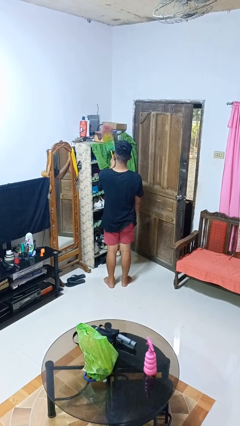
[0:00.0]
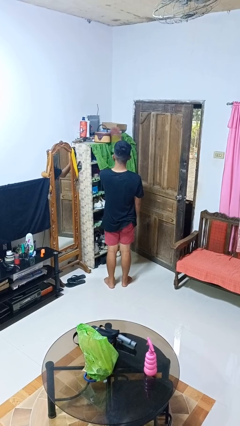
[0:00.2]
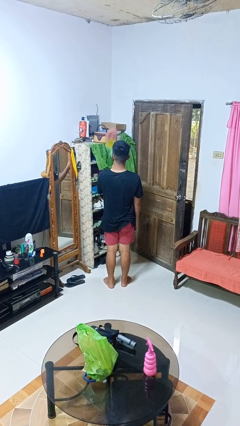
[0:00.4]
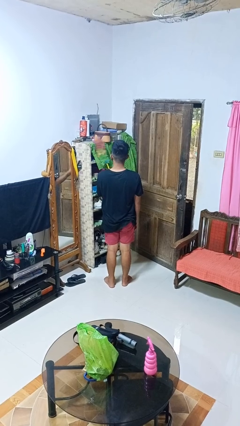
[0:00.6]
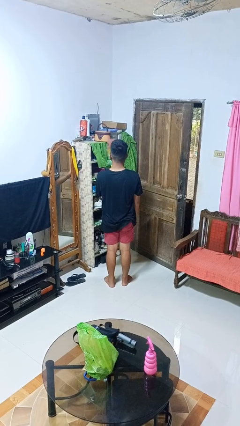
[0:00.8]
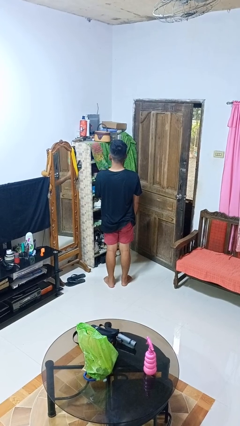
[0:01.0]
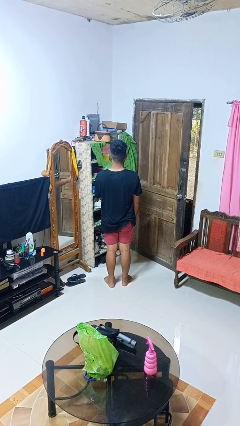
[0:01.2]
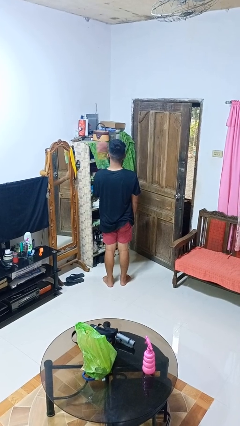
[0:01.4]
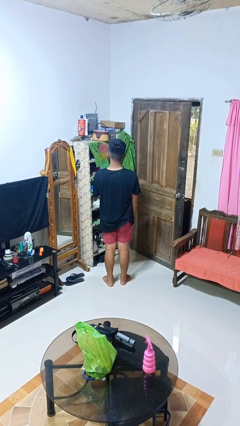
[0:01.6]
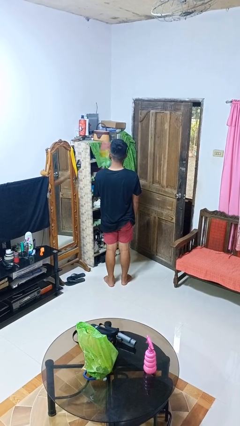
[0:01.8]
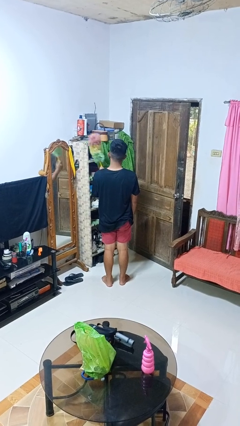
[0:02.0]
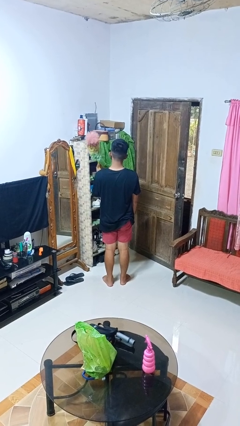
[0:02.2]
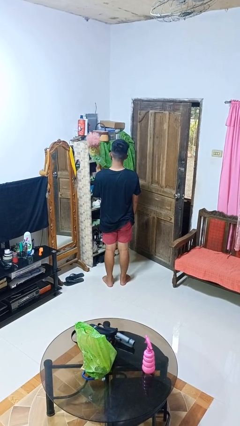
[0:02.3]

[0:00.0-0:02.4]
person dusts furniture

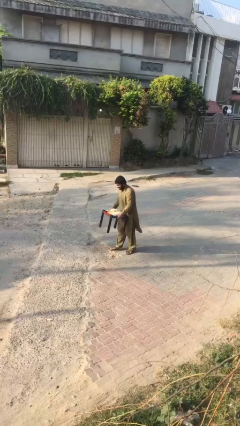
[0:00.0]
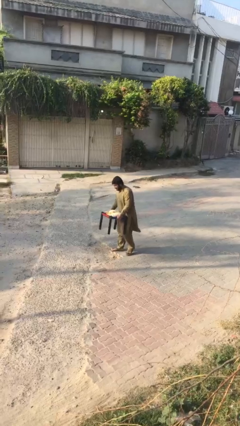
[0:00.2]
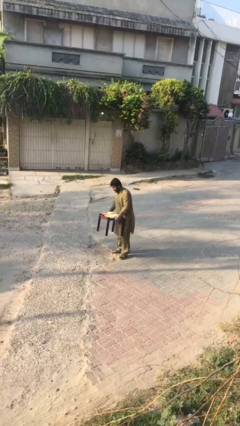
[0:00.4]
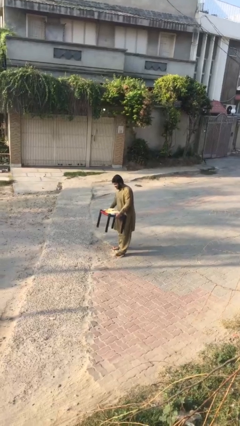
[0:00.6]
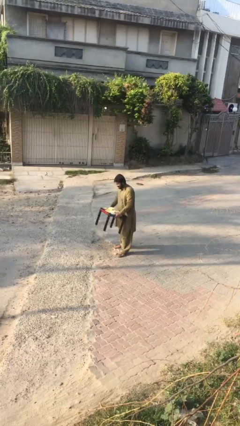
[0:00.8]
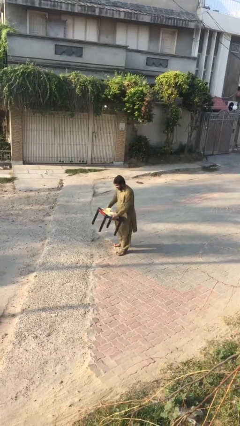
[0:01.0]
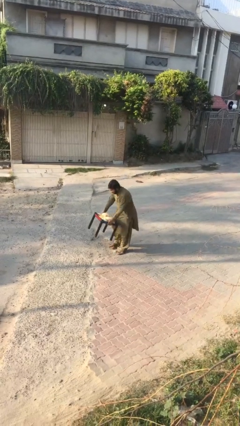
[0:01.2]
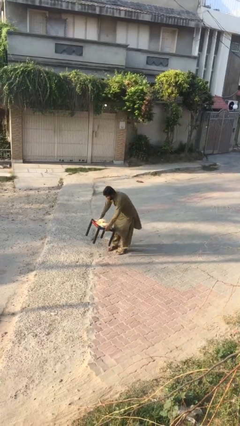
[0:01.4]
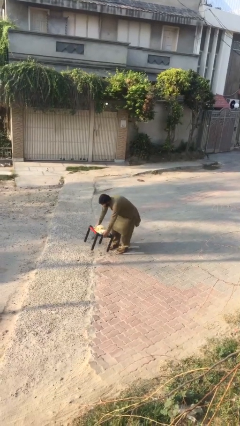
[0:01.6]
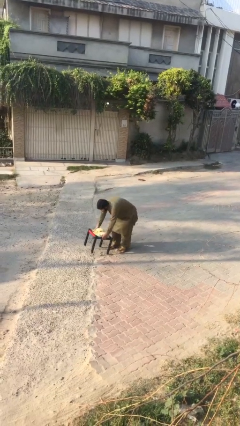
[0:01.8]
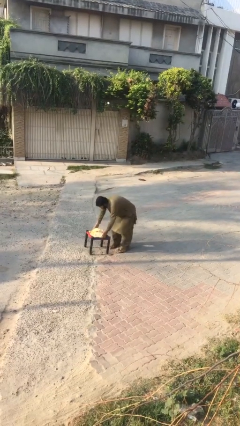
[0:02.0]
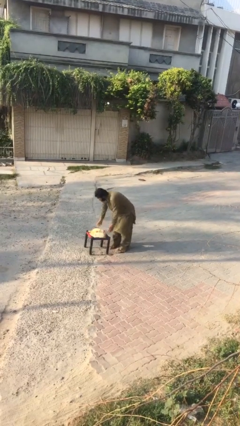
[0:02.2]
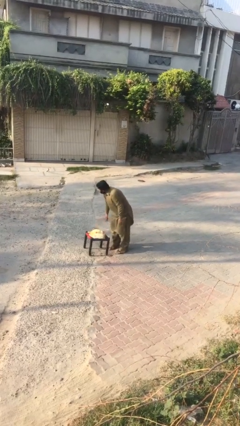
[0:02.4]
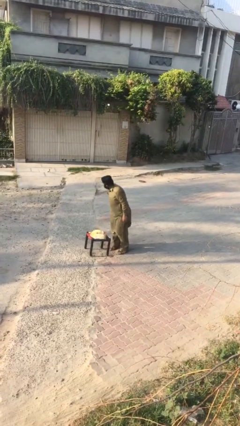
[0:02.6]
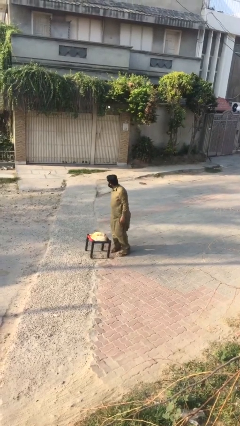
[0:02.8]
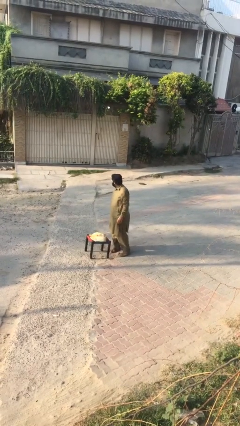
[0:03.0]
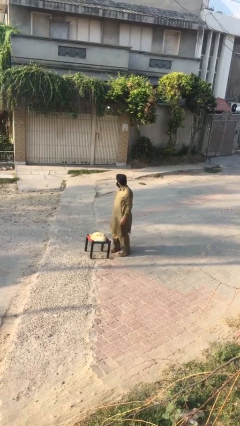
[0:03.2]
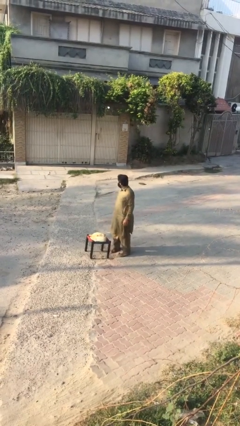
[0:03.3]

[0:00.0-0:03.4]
person puts down object on floor

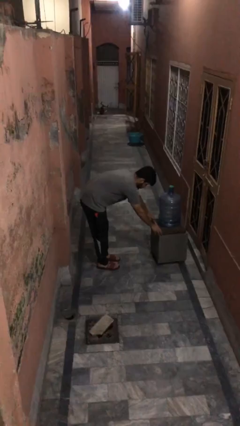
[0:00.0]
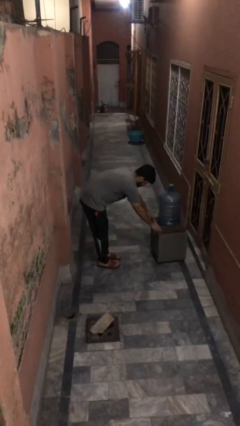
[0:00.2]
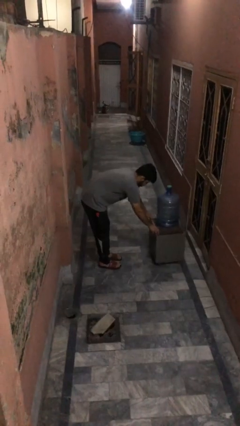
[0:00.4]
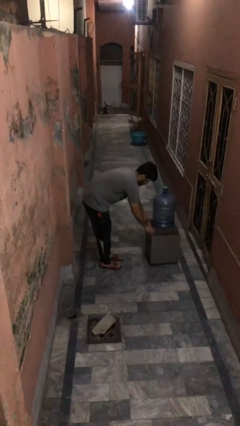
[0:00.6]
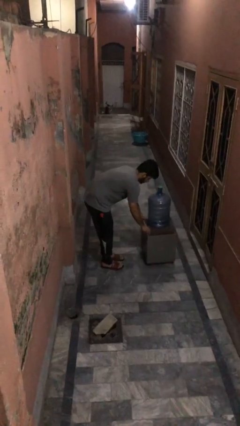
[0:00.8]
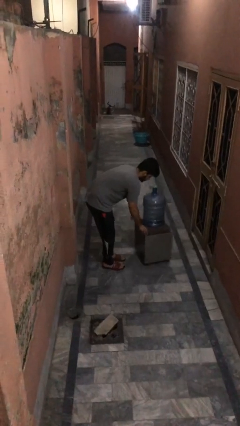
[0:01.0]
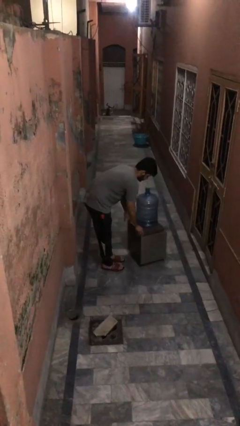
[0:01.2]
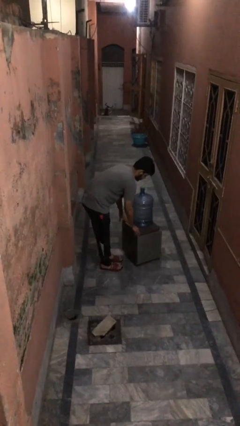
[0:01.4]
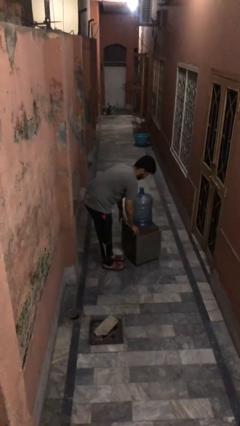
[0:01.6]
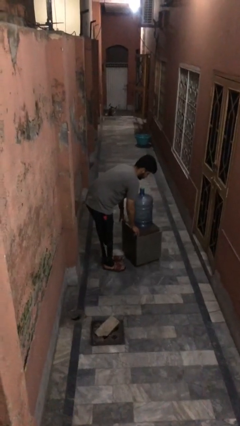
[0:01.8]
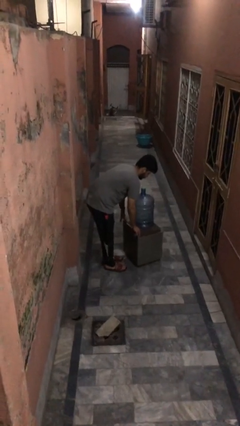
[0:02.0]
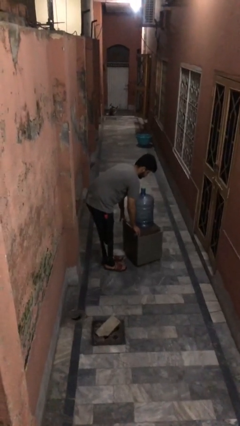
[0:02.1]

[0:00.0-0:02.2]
person pulls wheeled cart

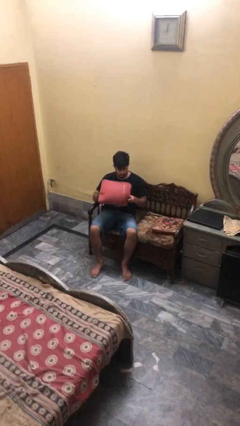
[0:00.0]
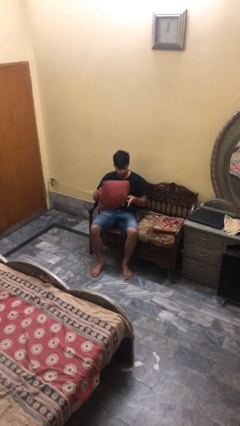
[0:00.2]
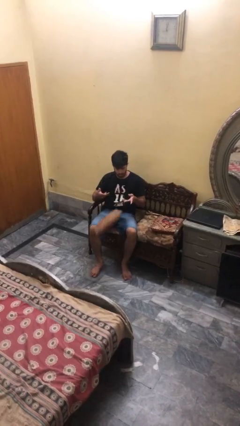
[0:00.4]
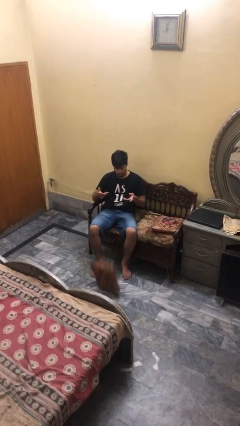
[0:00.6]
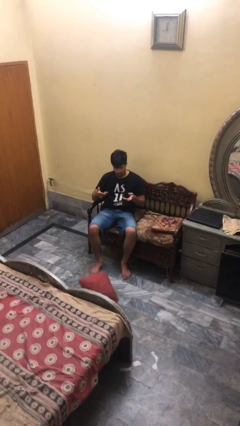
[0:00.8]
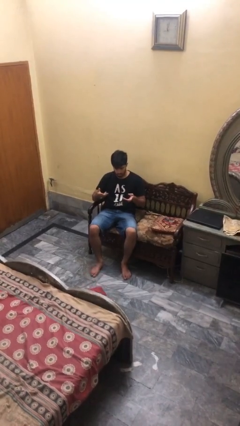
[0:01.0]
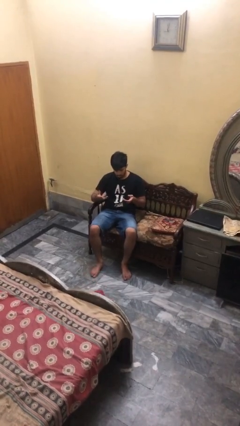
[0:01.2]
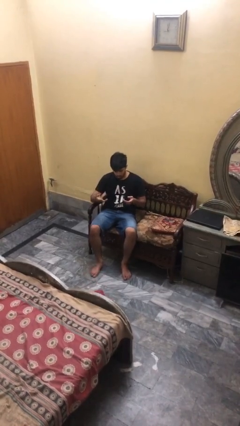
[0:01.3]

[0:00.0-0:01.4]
person drops object

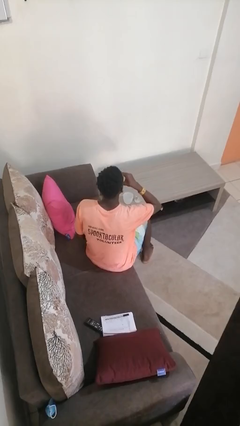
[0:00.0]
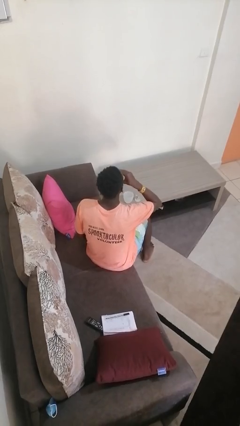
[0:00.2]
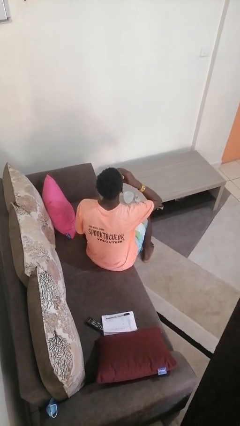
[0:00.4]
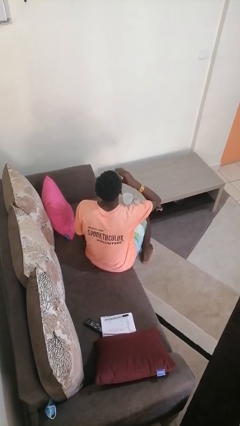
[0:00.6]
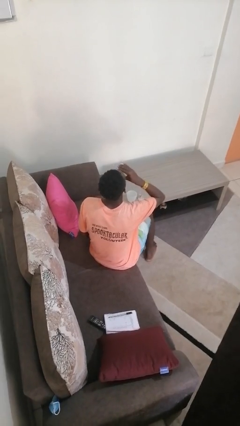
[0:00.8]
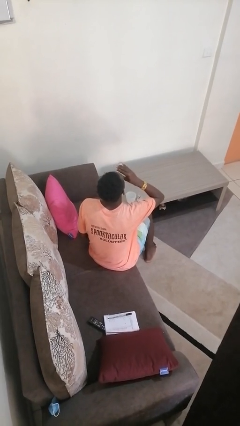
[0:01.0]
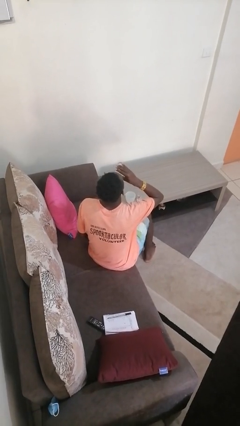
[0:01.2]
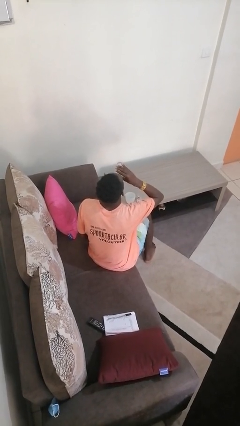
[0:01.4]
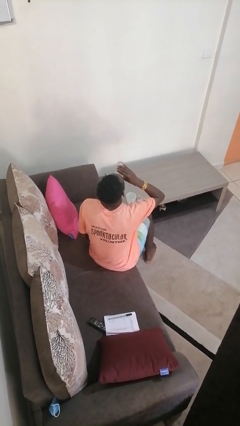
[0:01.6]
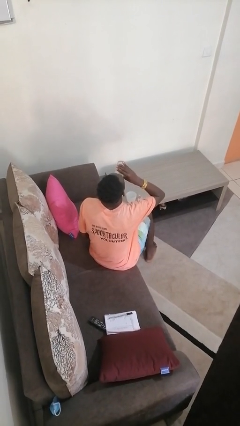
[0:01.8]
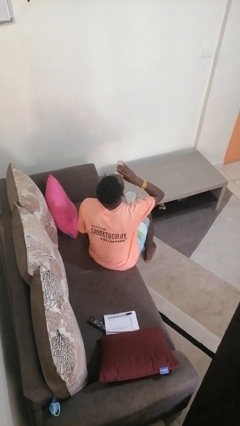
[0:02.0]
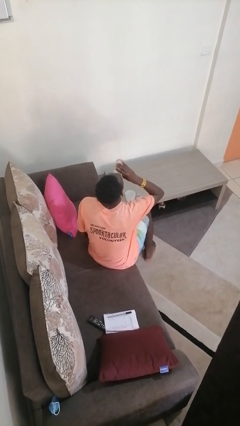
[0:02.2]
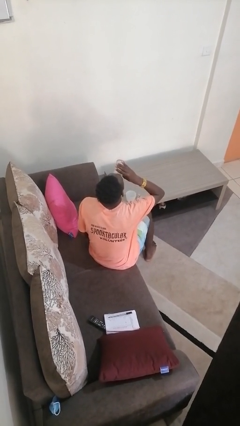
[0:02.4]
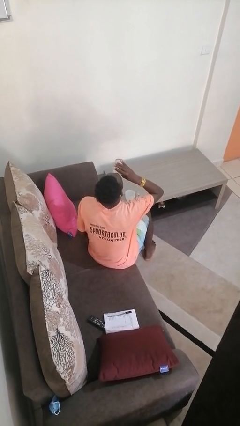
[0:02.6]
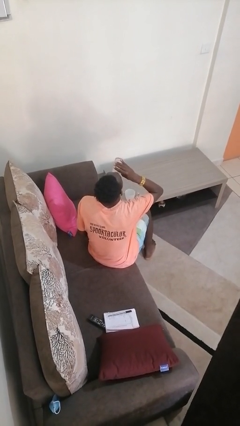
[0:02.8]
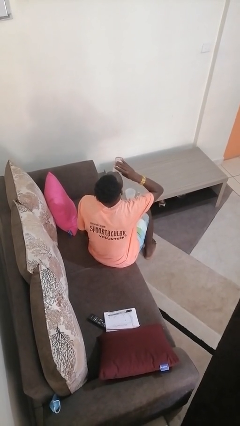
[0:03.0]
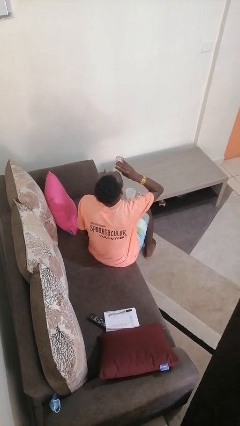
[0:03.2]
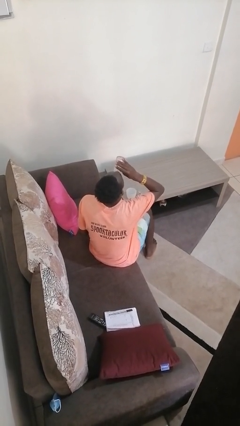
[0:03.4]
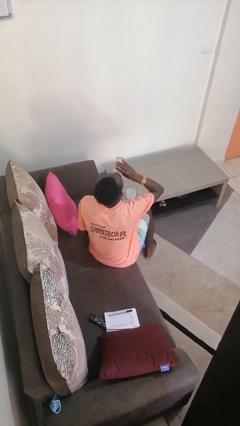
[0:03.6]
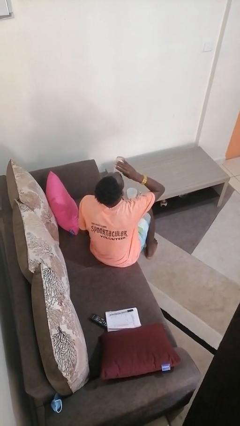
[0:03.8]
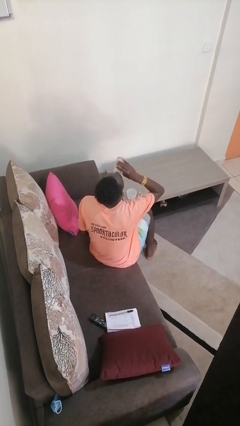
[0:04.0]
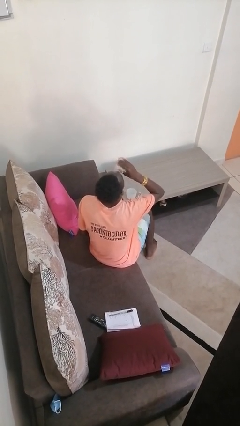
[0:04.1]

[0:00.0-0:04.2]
person drinks from shotglass

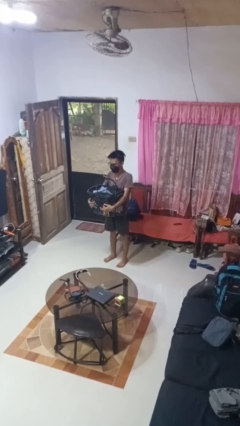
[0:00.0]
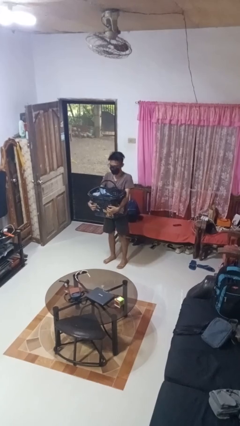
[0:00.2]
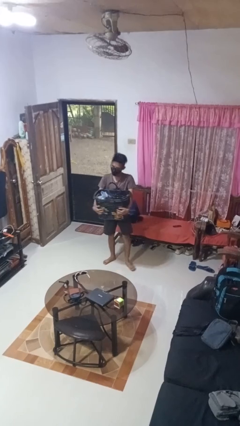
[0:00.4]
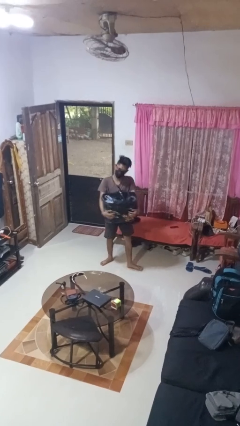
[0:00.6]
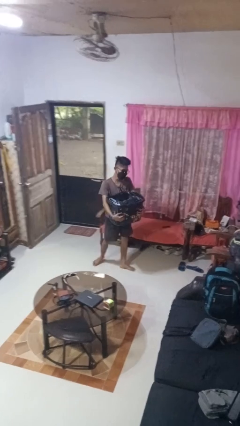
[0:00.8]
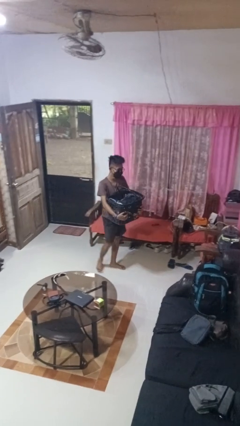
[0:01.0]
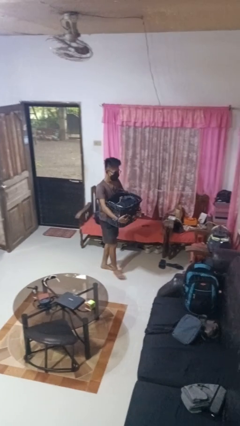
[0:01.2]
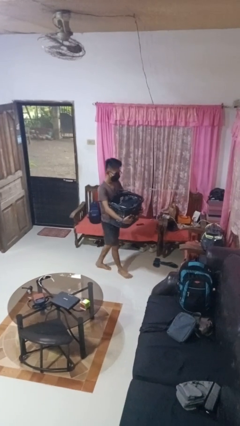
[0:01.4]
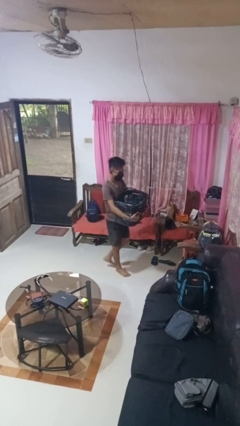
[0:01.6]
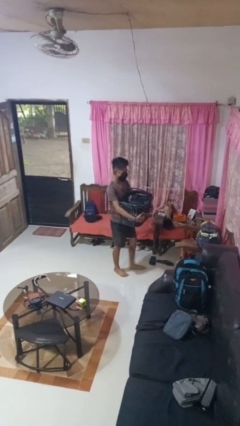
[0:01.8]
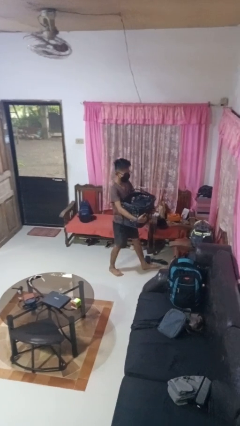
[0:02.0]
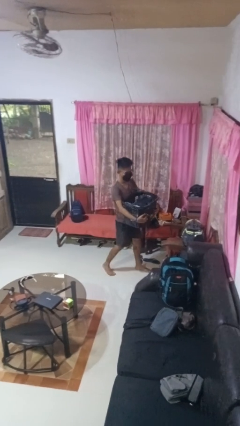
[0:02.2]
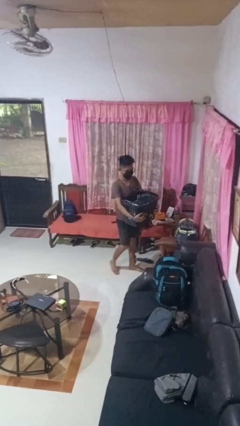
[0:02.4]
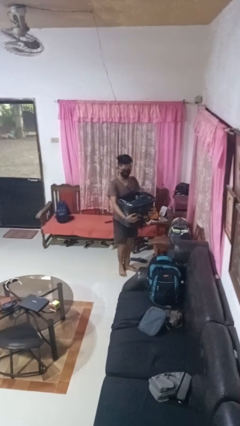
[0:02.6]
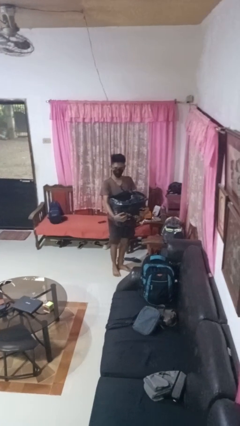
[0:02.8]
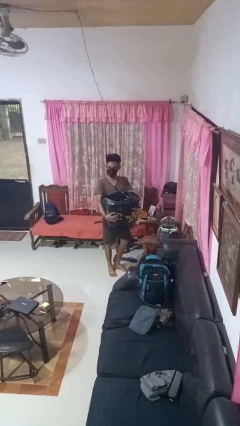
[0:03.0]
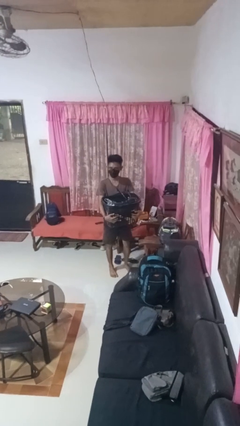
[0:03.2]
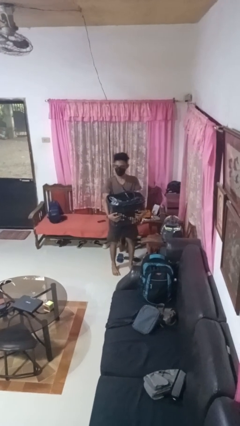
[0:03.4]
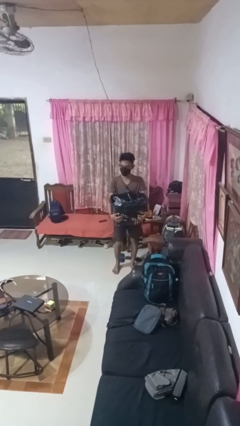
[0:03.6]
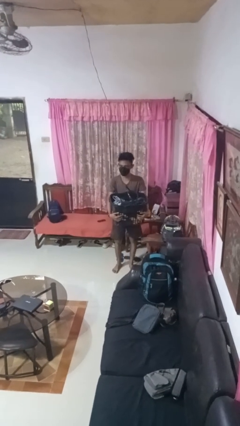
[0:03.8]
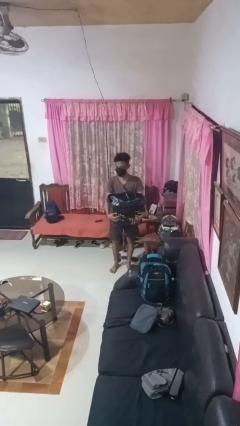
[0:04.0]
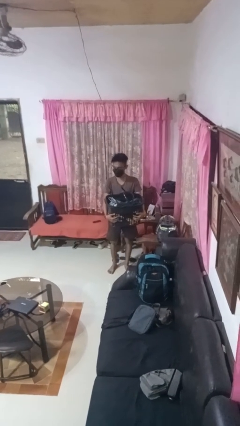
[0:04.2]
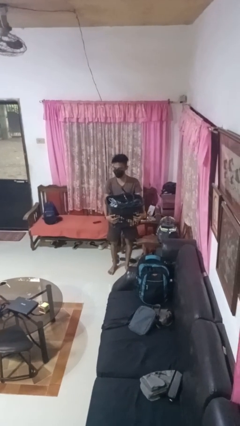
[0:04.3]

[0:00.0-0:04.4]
person carries laundry basket
